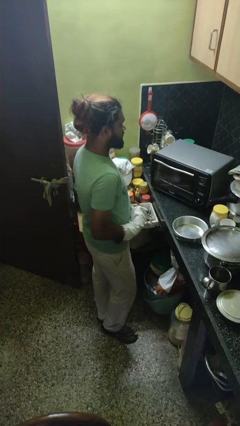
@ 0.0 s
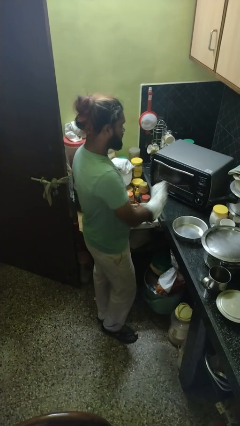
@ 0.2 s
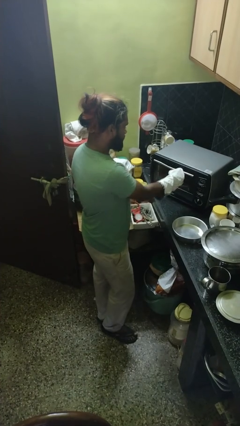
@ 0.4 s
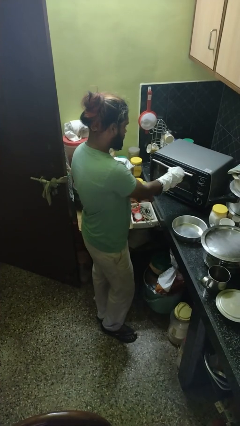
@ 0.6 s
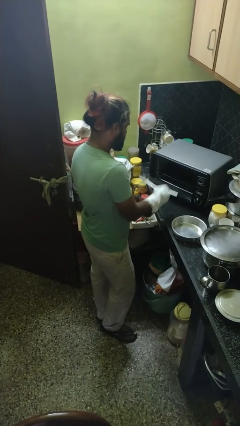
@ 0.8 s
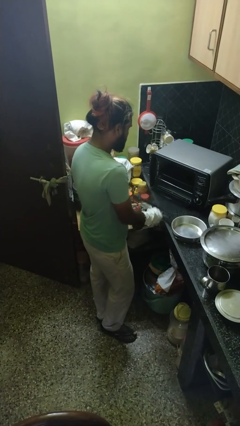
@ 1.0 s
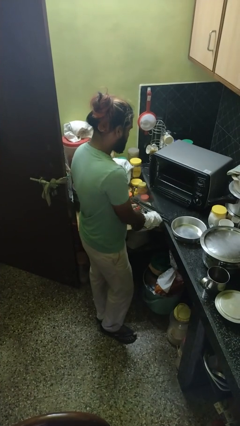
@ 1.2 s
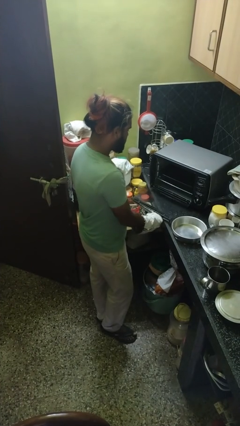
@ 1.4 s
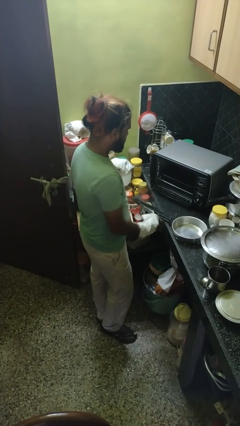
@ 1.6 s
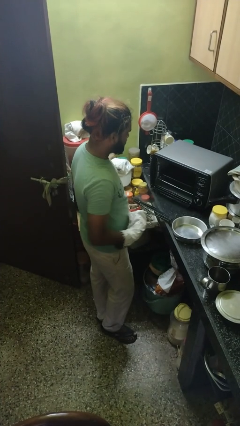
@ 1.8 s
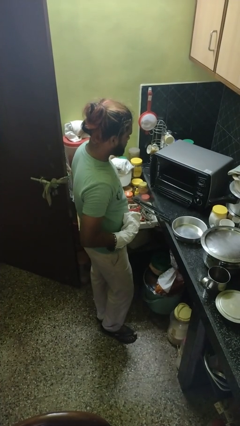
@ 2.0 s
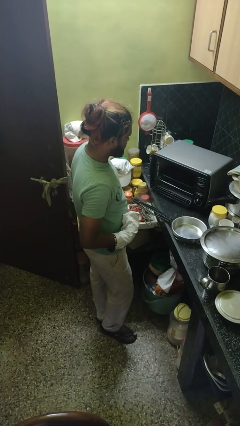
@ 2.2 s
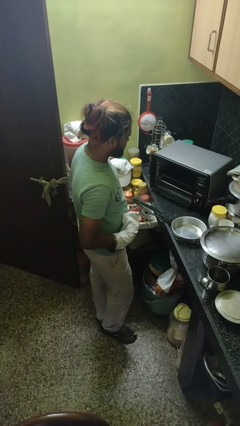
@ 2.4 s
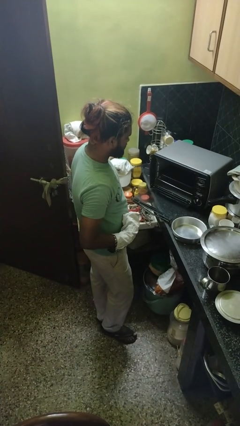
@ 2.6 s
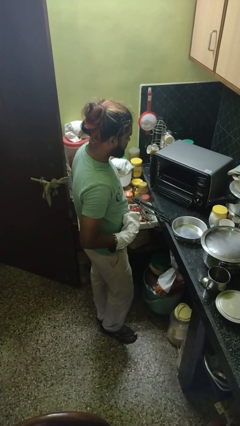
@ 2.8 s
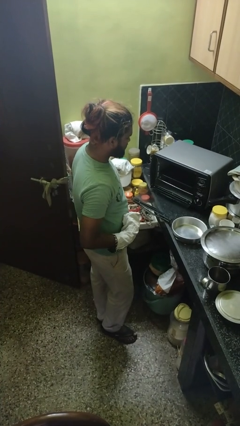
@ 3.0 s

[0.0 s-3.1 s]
person opens oven door

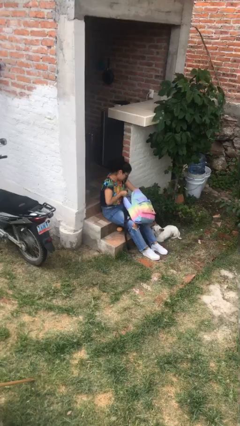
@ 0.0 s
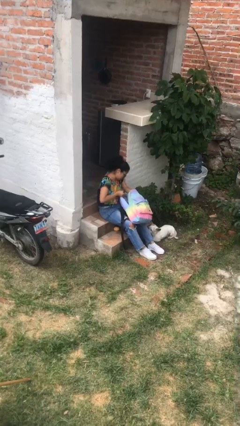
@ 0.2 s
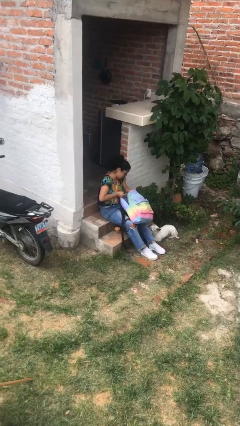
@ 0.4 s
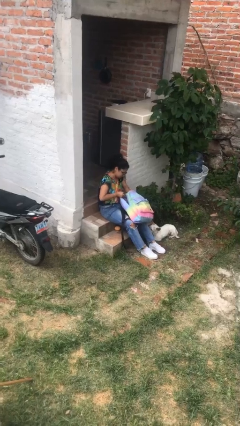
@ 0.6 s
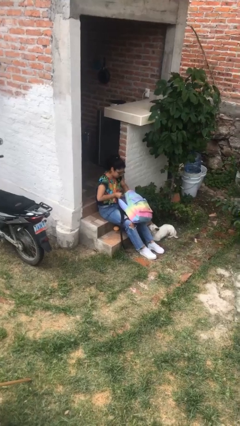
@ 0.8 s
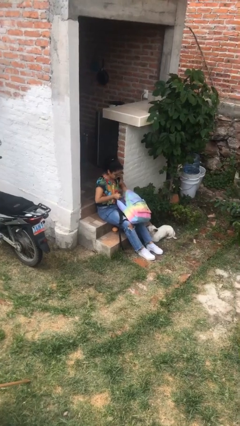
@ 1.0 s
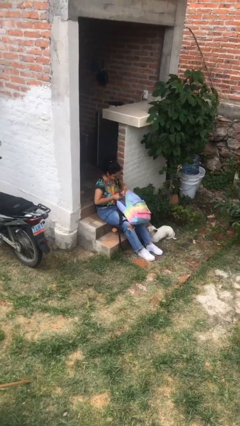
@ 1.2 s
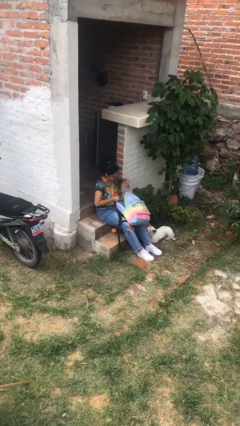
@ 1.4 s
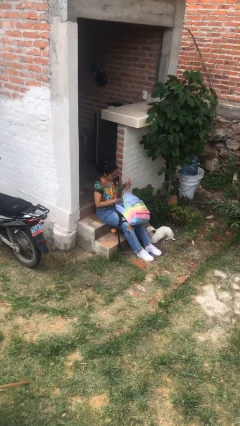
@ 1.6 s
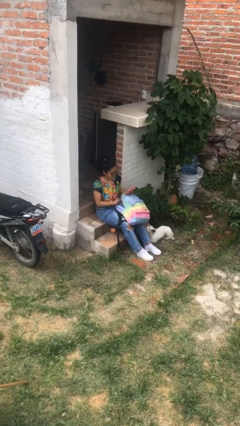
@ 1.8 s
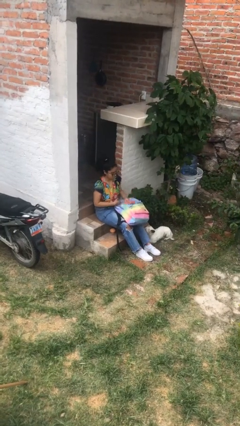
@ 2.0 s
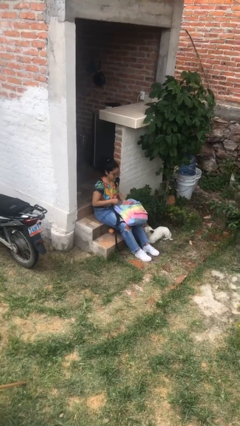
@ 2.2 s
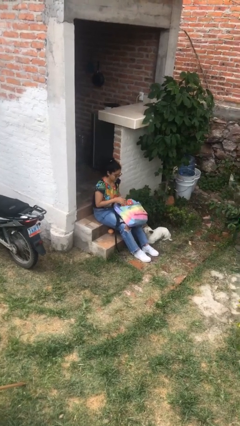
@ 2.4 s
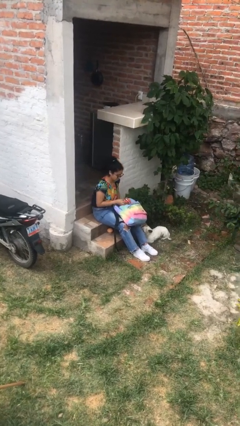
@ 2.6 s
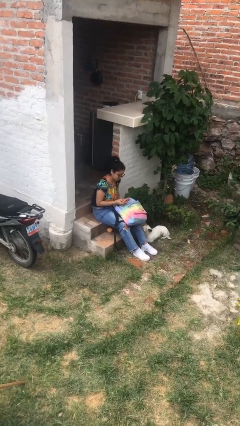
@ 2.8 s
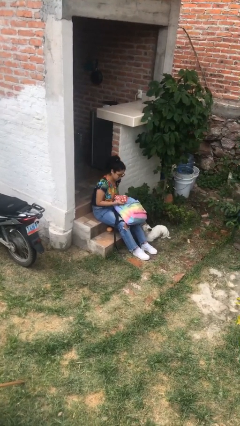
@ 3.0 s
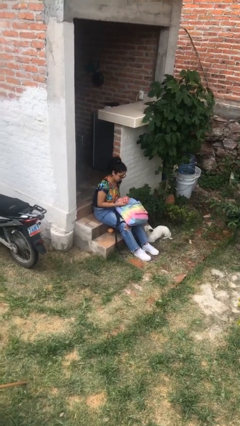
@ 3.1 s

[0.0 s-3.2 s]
person takes object from backpack

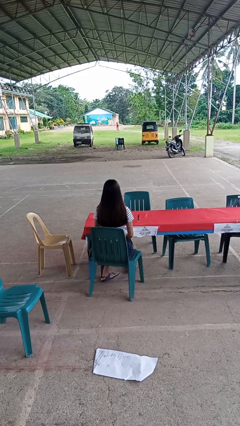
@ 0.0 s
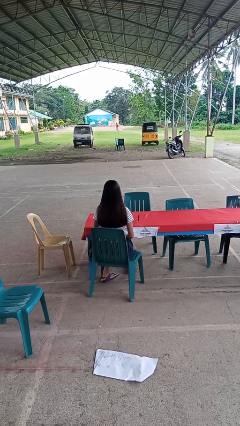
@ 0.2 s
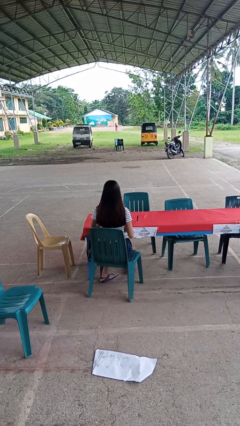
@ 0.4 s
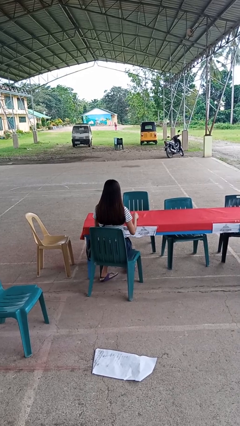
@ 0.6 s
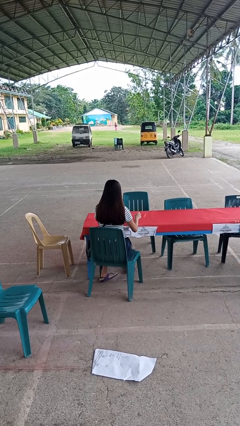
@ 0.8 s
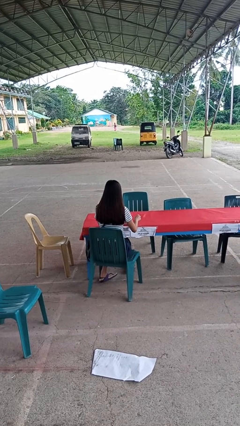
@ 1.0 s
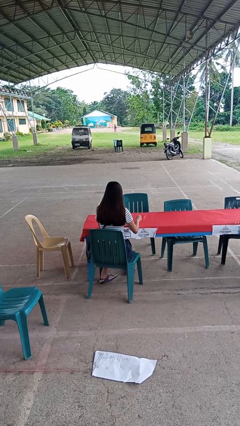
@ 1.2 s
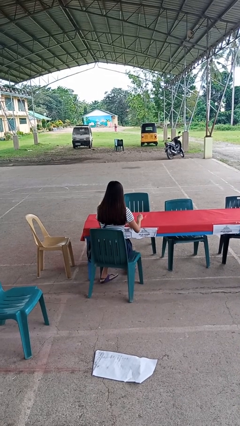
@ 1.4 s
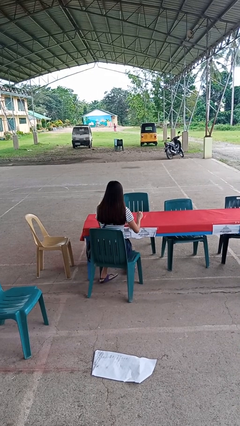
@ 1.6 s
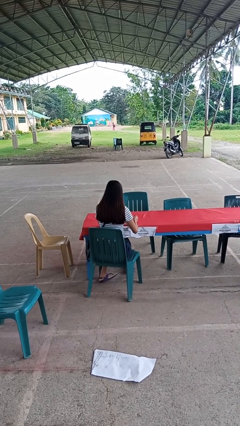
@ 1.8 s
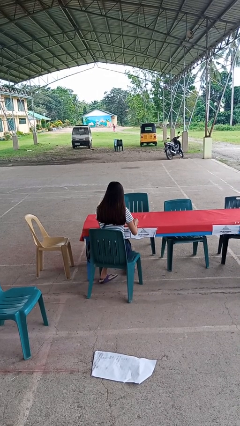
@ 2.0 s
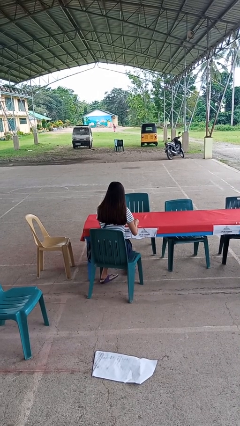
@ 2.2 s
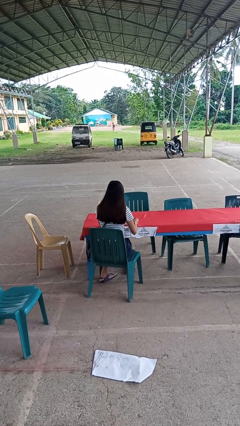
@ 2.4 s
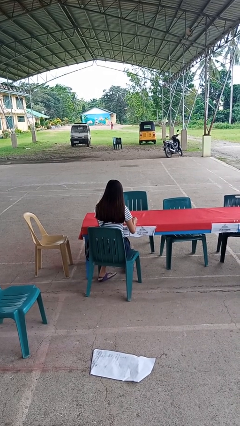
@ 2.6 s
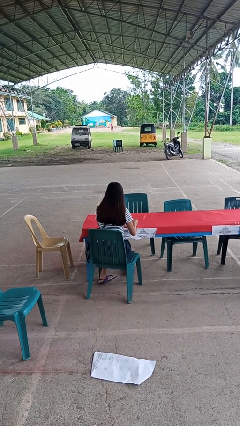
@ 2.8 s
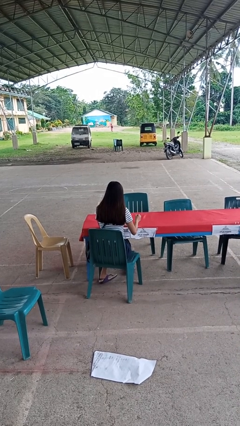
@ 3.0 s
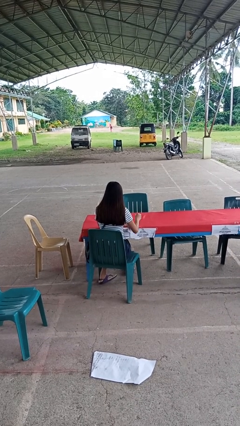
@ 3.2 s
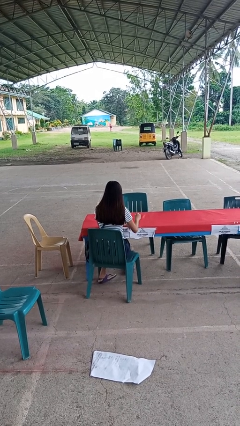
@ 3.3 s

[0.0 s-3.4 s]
person paints fingernails

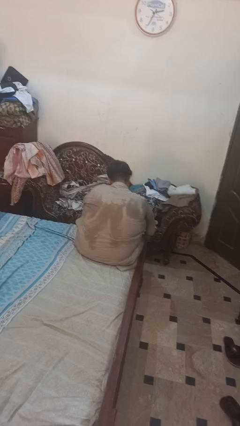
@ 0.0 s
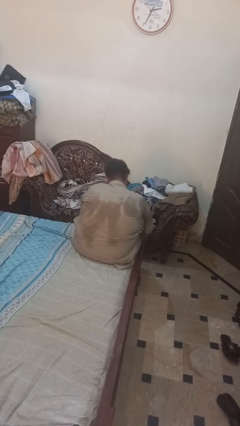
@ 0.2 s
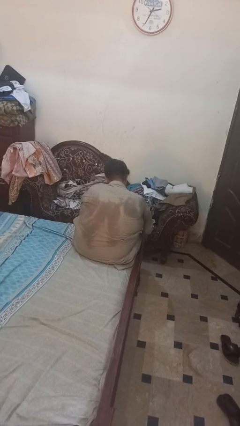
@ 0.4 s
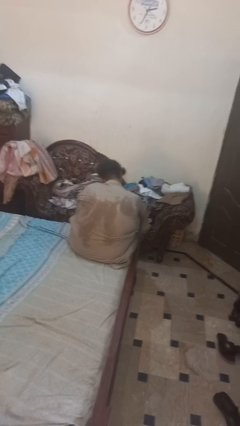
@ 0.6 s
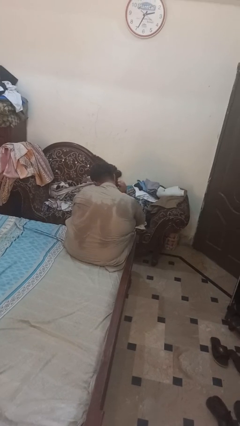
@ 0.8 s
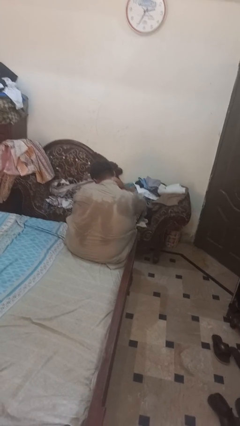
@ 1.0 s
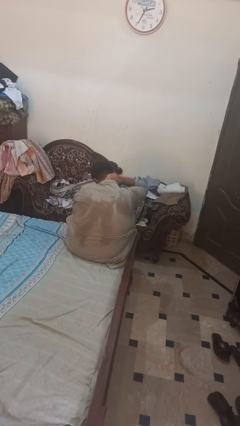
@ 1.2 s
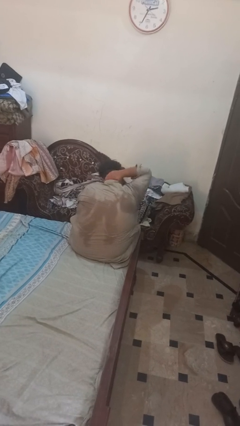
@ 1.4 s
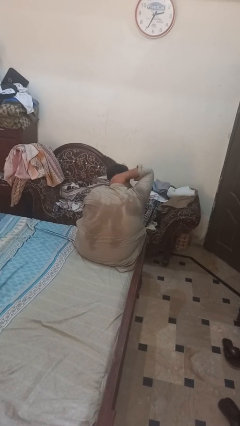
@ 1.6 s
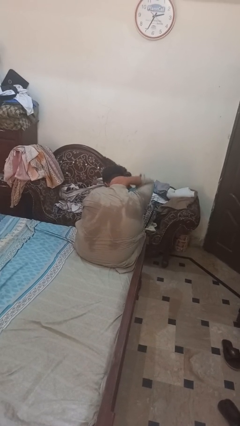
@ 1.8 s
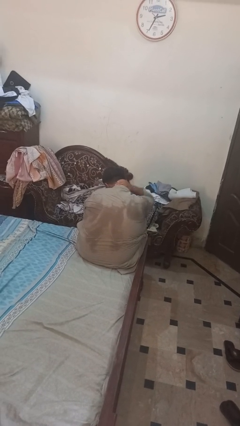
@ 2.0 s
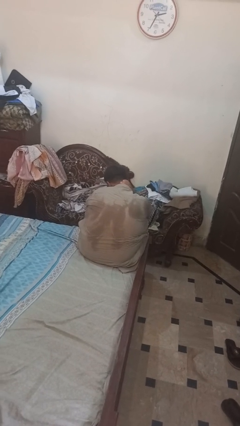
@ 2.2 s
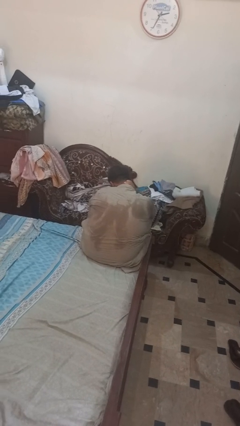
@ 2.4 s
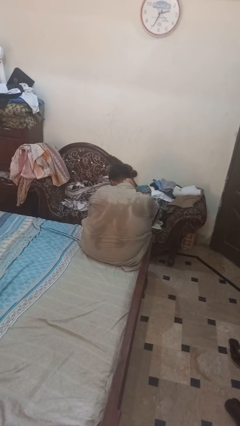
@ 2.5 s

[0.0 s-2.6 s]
person rubs neck

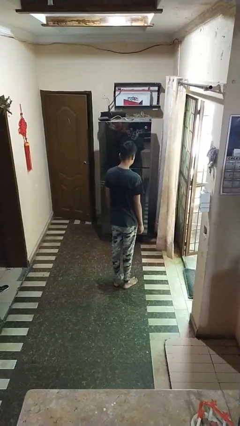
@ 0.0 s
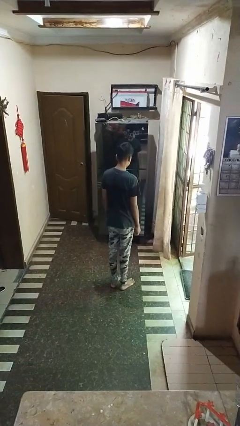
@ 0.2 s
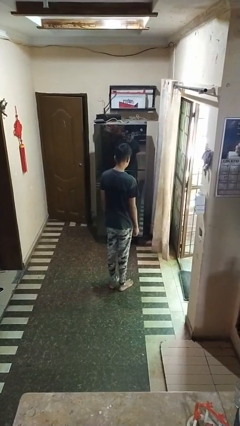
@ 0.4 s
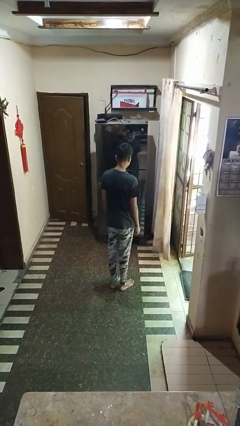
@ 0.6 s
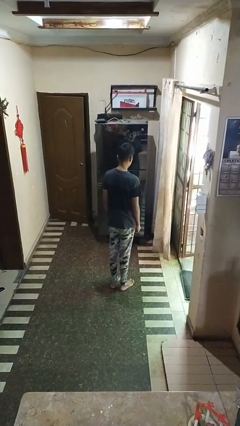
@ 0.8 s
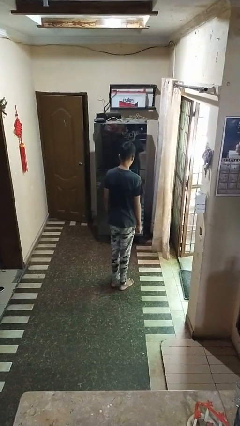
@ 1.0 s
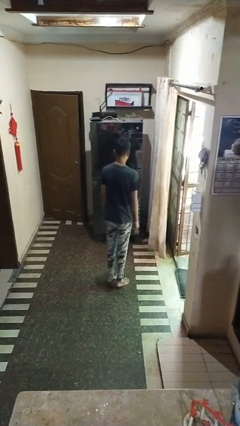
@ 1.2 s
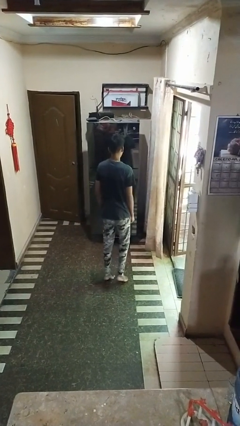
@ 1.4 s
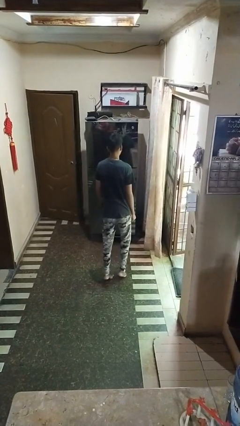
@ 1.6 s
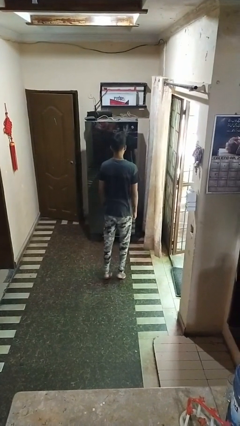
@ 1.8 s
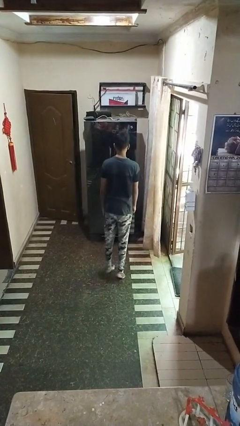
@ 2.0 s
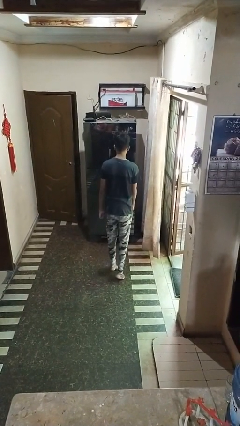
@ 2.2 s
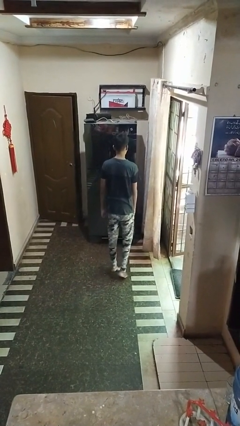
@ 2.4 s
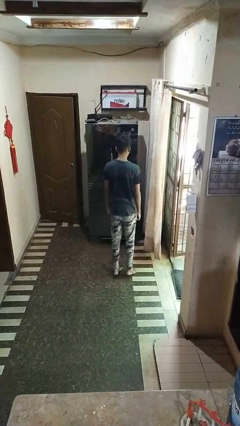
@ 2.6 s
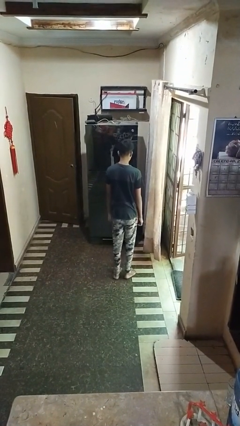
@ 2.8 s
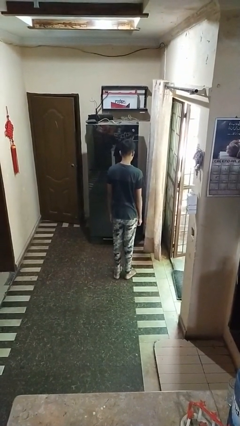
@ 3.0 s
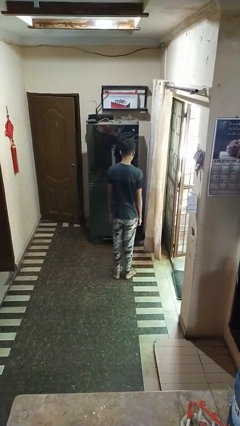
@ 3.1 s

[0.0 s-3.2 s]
person walks tiptoe

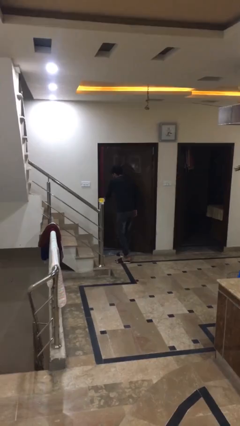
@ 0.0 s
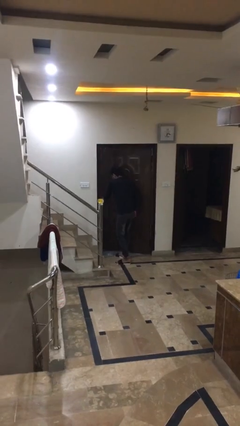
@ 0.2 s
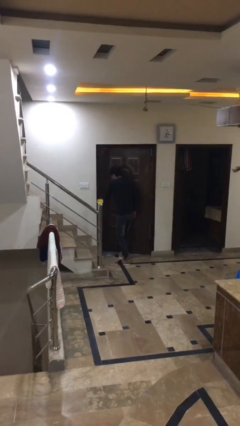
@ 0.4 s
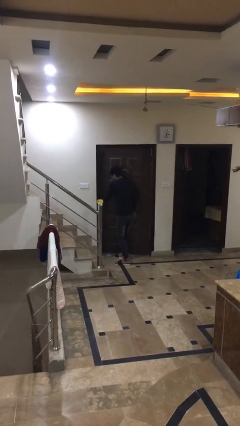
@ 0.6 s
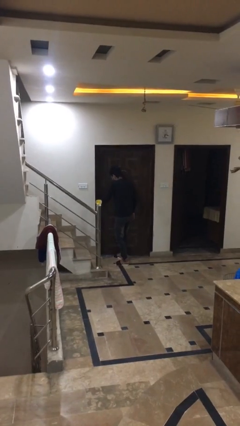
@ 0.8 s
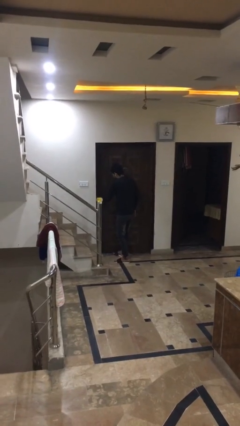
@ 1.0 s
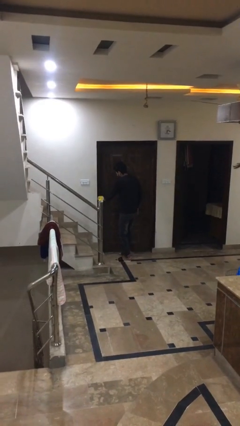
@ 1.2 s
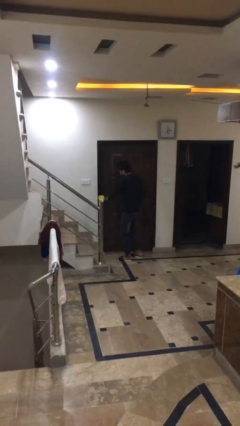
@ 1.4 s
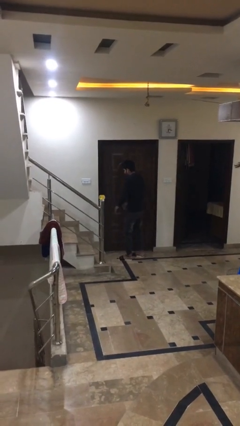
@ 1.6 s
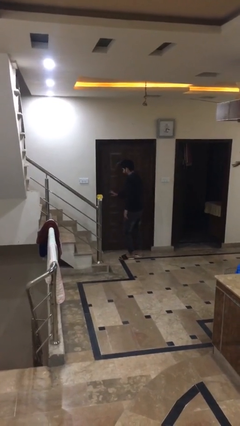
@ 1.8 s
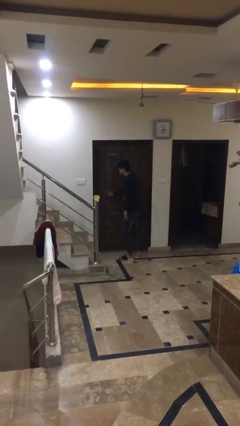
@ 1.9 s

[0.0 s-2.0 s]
person closes facility door
